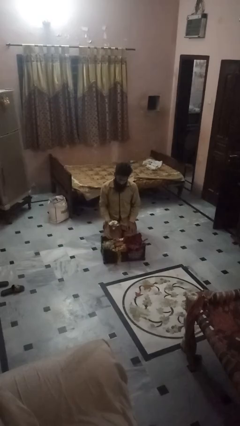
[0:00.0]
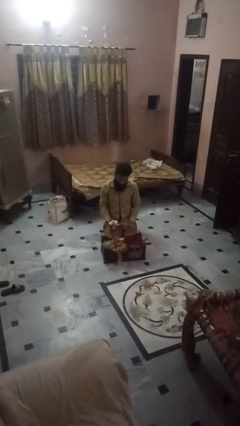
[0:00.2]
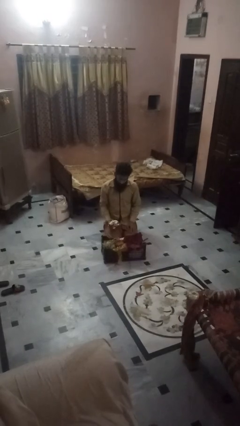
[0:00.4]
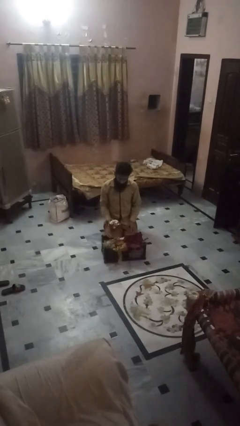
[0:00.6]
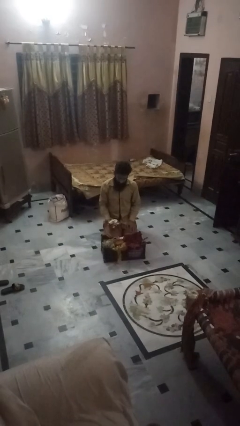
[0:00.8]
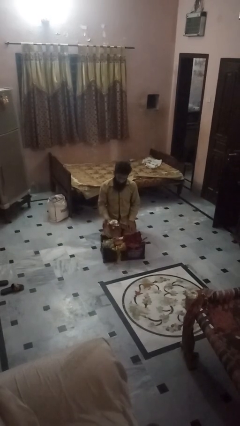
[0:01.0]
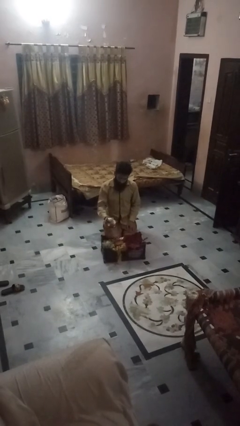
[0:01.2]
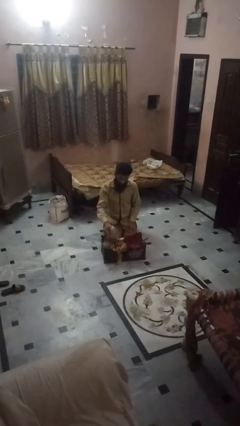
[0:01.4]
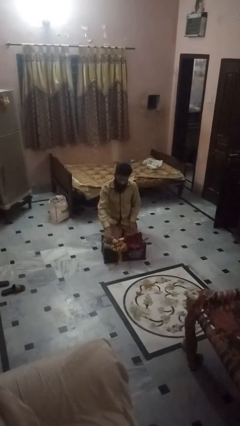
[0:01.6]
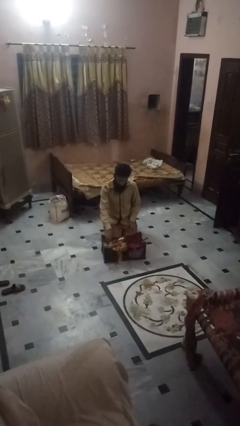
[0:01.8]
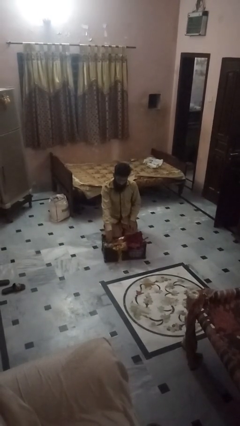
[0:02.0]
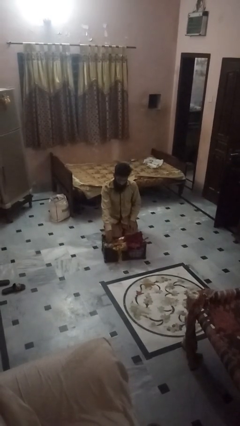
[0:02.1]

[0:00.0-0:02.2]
person takes object from basket

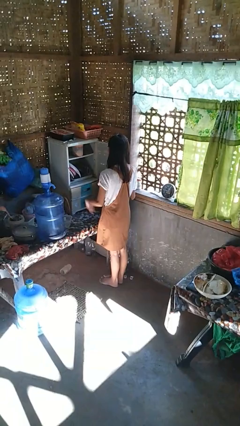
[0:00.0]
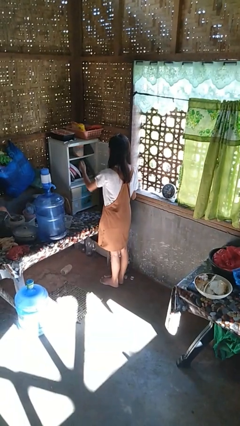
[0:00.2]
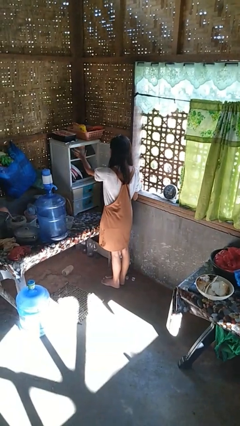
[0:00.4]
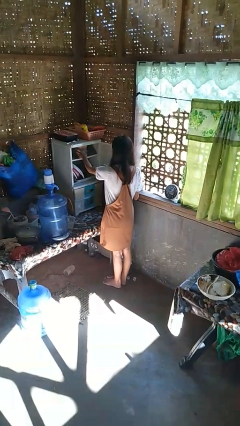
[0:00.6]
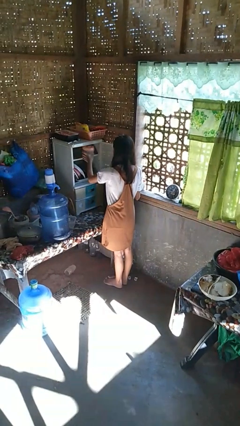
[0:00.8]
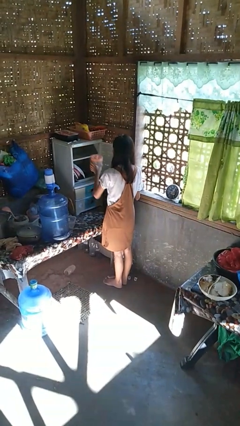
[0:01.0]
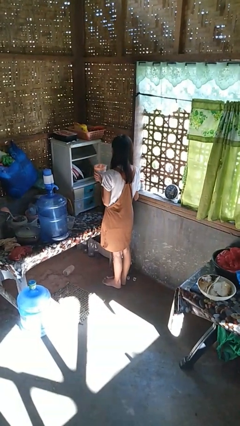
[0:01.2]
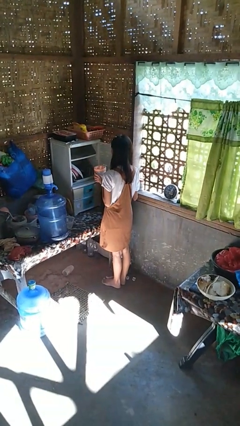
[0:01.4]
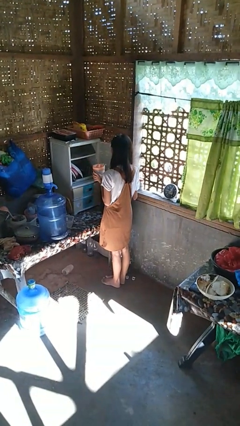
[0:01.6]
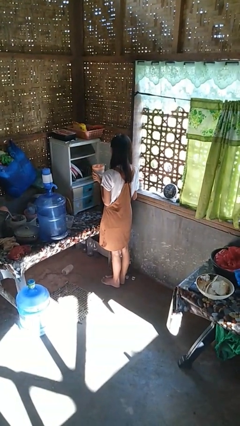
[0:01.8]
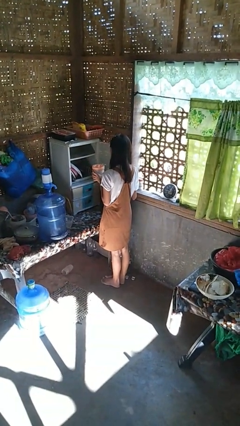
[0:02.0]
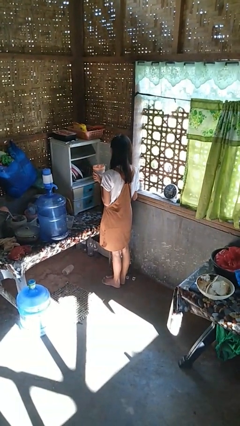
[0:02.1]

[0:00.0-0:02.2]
person picks up object from cabinet

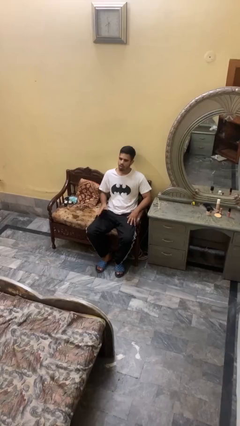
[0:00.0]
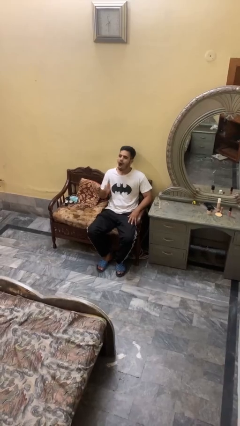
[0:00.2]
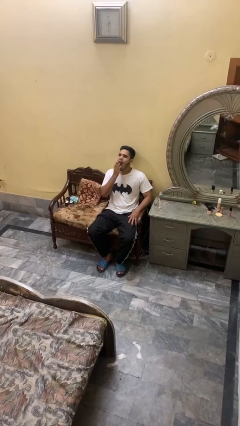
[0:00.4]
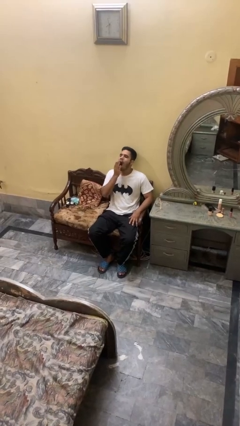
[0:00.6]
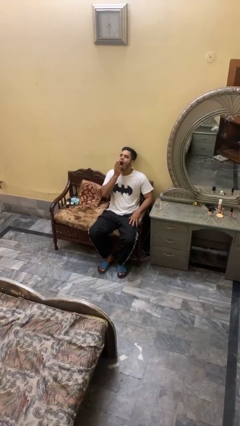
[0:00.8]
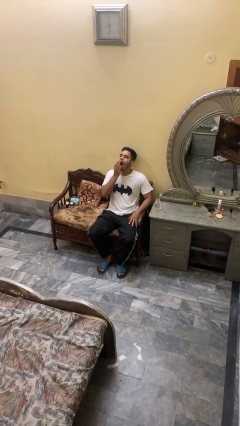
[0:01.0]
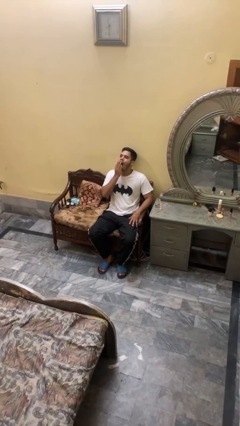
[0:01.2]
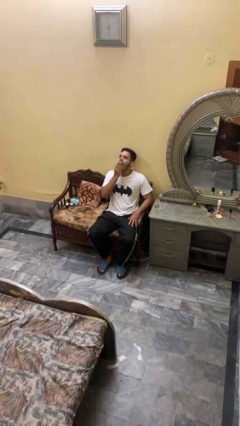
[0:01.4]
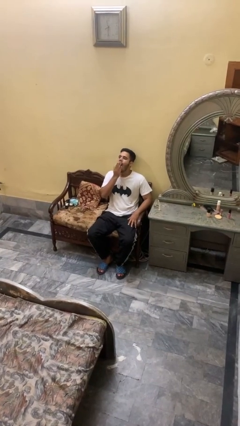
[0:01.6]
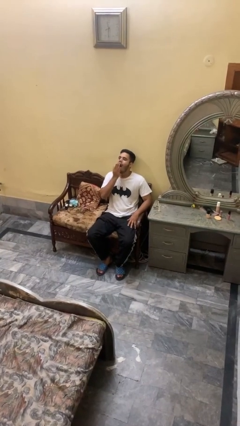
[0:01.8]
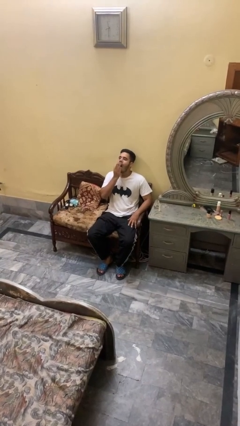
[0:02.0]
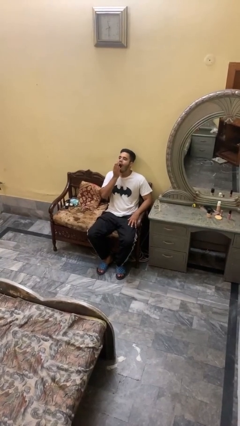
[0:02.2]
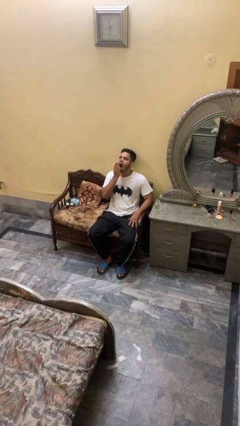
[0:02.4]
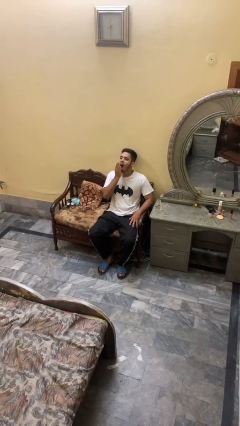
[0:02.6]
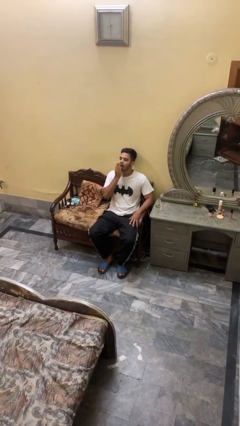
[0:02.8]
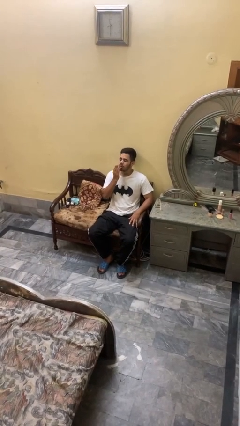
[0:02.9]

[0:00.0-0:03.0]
person yawns

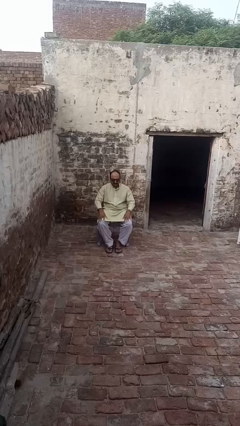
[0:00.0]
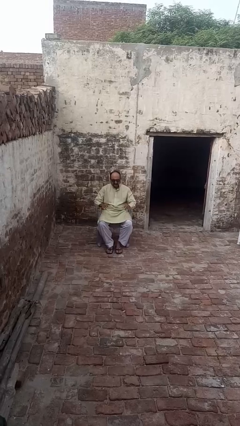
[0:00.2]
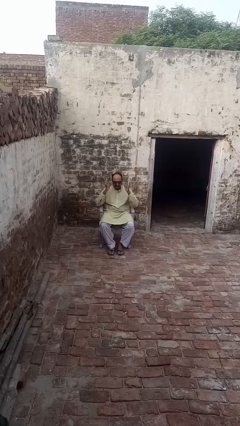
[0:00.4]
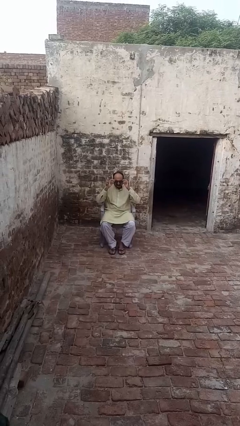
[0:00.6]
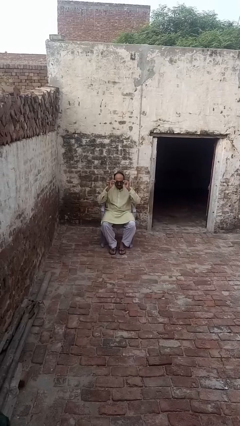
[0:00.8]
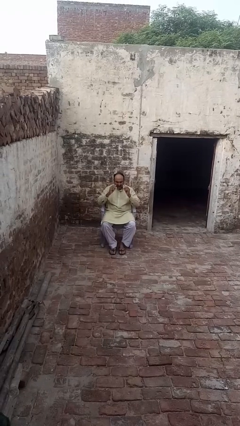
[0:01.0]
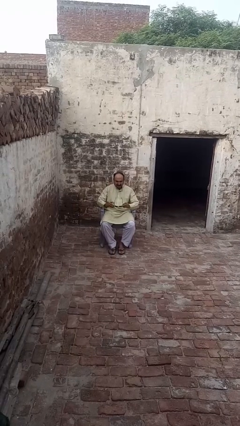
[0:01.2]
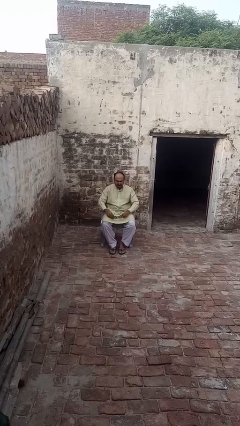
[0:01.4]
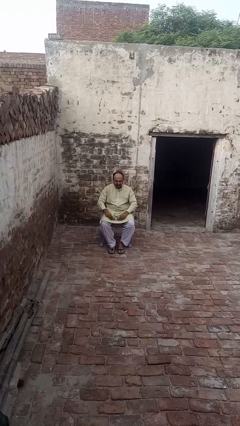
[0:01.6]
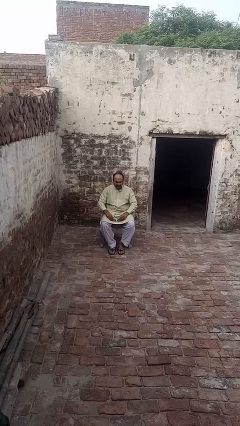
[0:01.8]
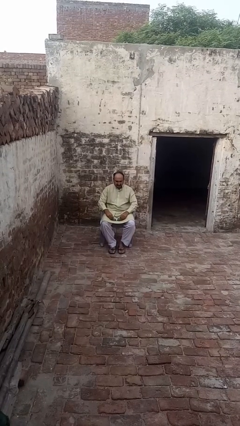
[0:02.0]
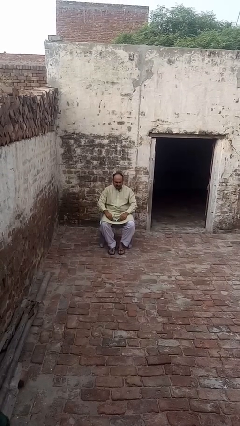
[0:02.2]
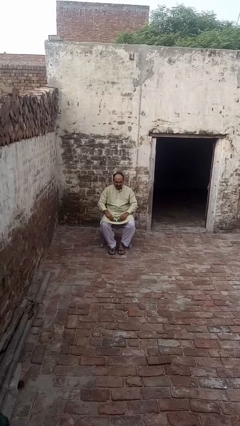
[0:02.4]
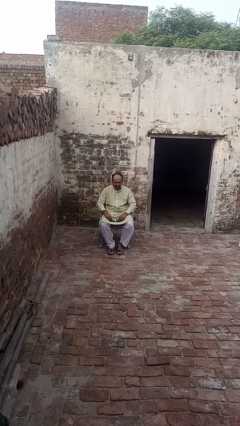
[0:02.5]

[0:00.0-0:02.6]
person takes off sunglasses

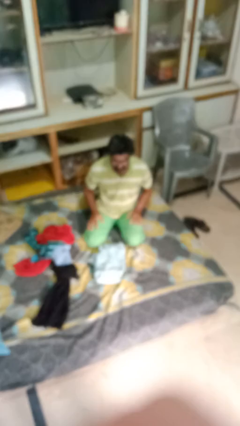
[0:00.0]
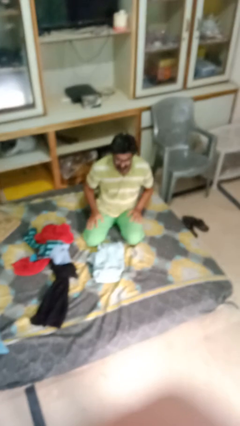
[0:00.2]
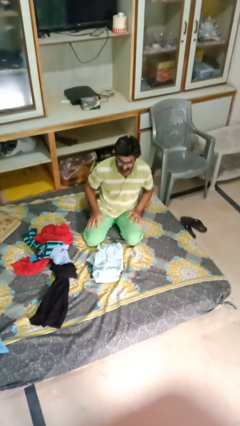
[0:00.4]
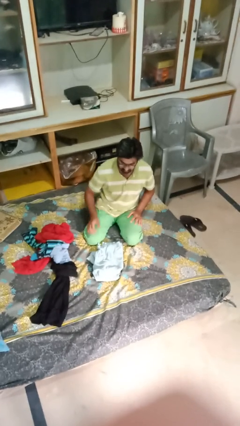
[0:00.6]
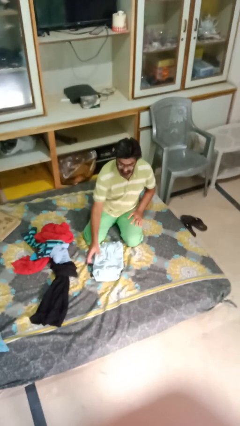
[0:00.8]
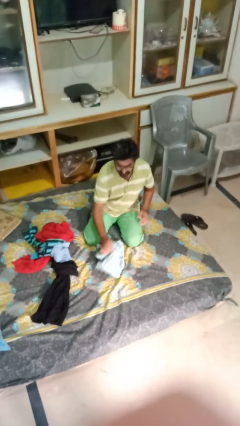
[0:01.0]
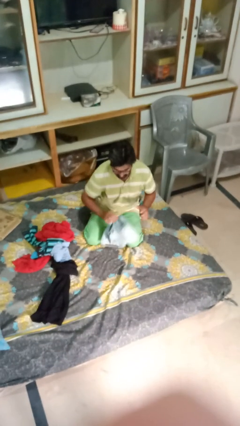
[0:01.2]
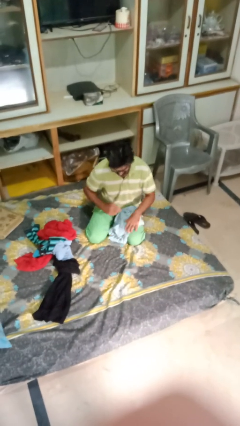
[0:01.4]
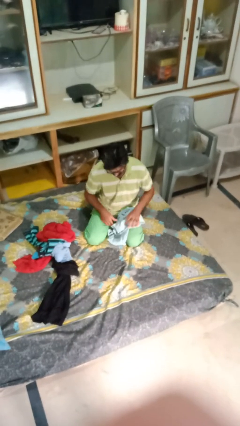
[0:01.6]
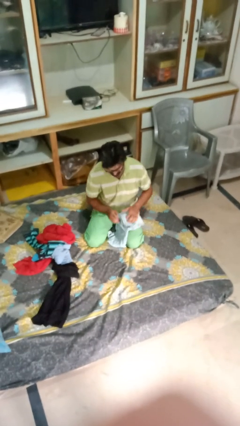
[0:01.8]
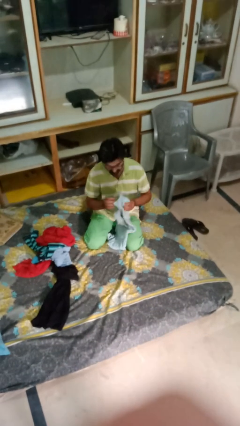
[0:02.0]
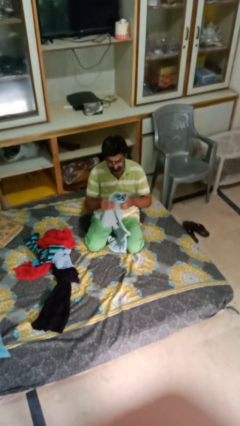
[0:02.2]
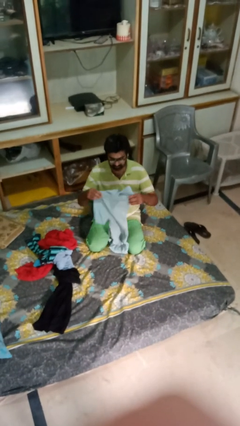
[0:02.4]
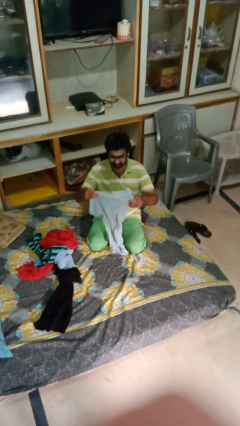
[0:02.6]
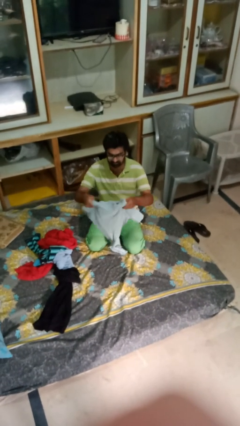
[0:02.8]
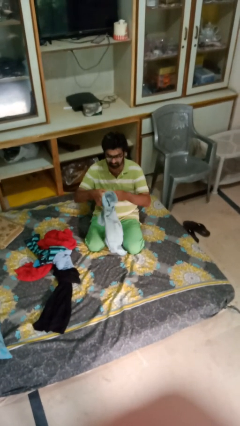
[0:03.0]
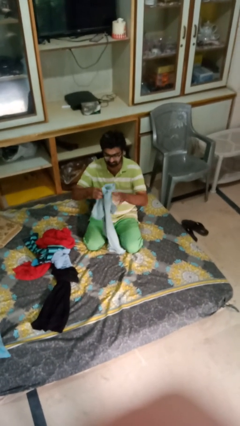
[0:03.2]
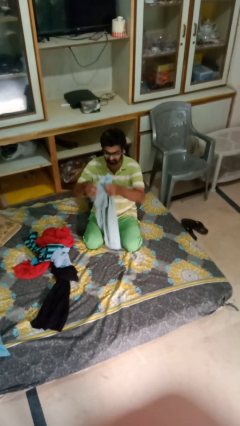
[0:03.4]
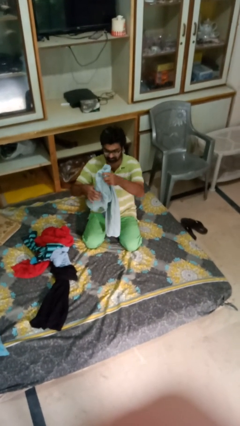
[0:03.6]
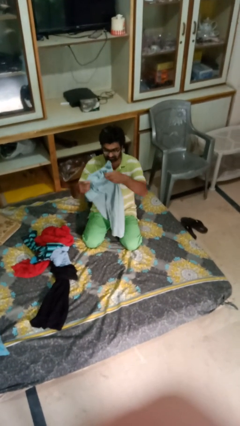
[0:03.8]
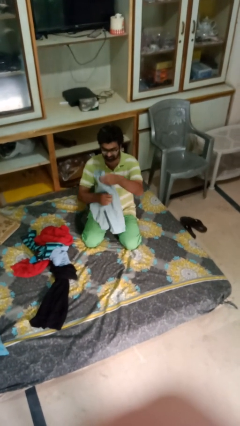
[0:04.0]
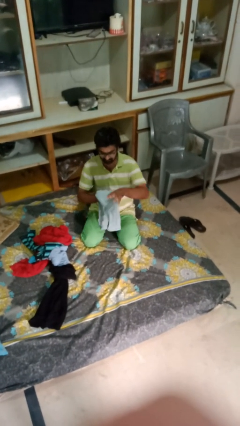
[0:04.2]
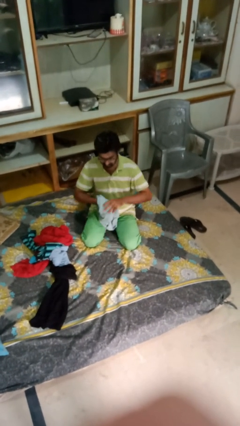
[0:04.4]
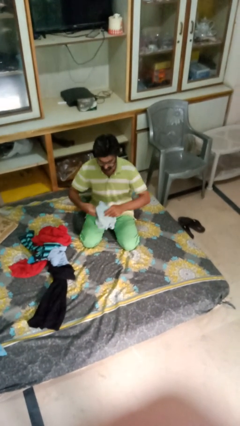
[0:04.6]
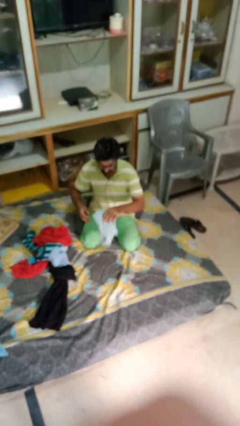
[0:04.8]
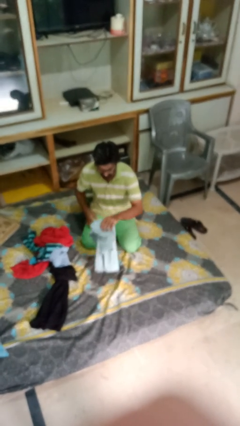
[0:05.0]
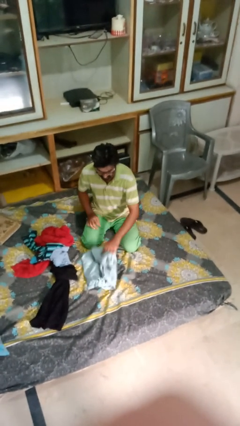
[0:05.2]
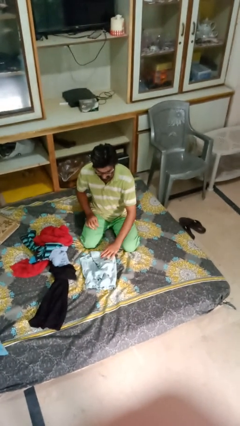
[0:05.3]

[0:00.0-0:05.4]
person folds shirt

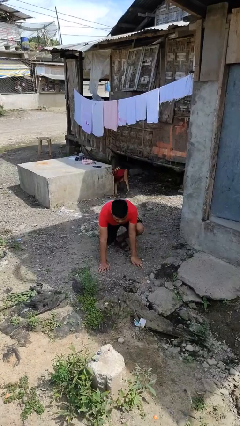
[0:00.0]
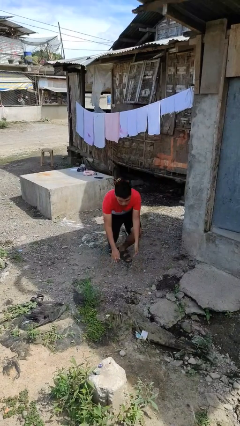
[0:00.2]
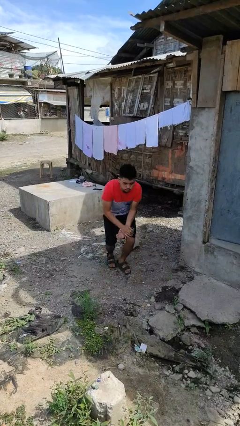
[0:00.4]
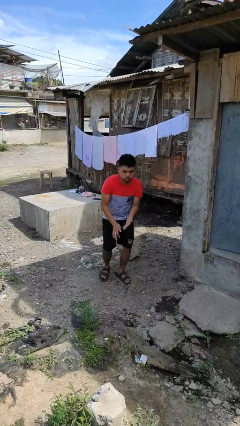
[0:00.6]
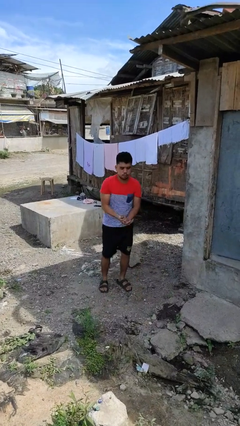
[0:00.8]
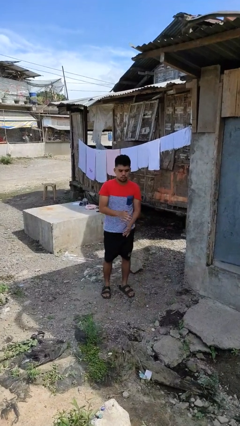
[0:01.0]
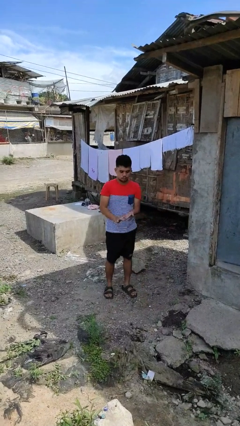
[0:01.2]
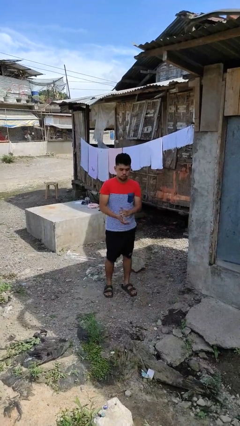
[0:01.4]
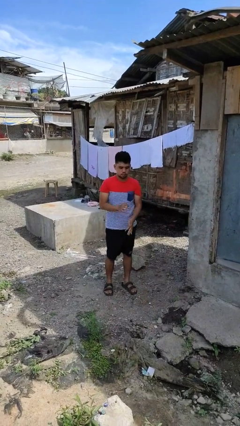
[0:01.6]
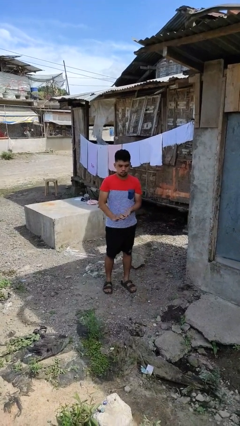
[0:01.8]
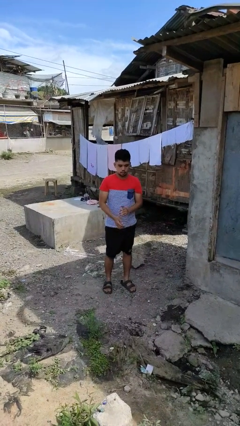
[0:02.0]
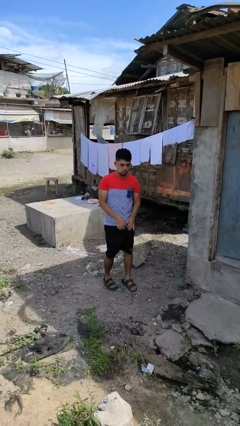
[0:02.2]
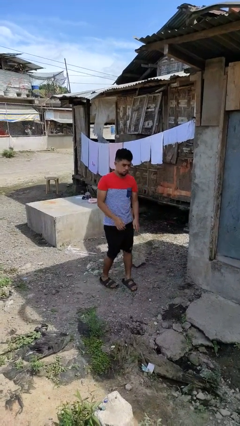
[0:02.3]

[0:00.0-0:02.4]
person stands up from floor
